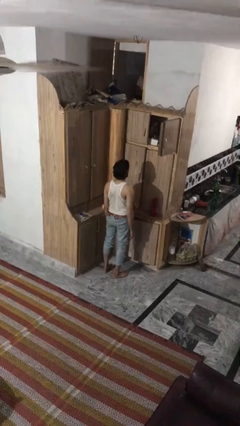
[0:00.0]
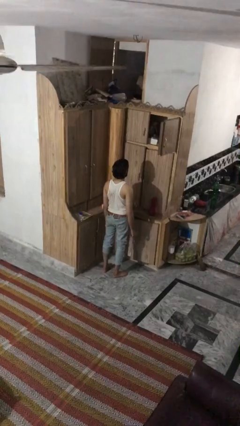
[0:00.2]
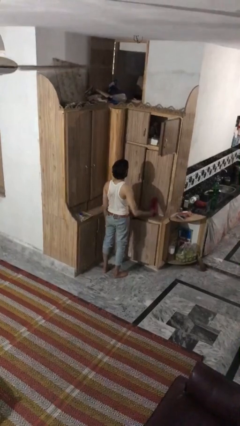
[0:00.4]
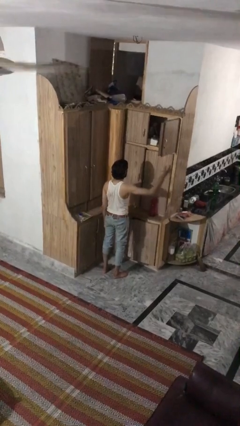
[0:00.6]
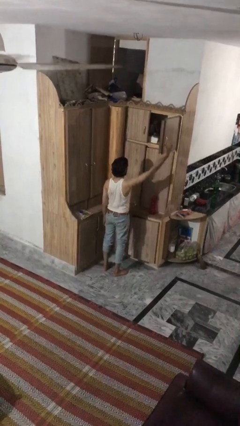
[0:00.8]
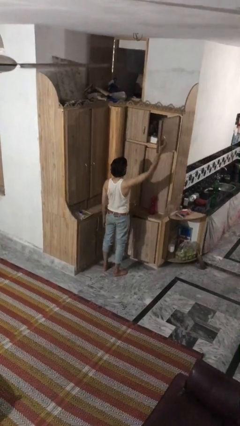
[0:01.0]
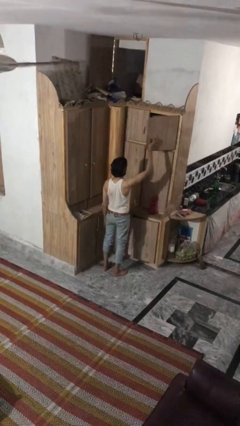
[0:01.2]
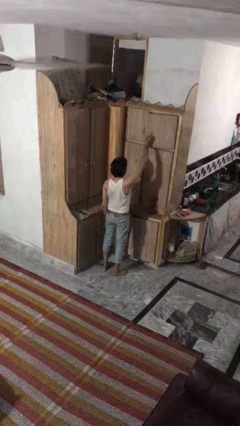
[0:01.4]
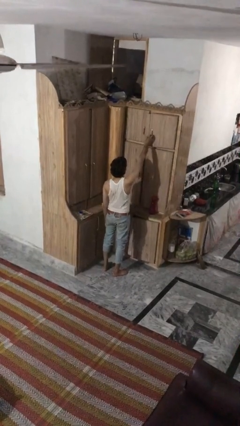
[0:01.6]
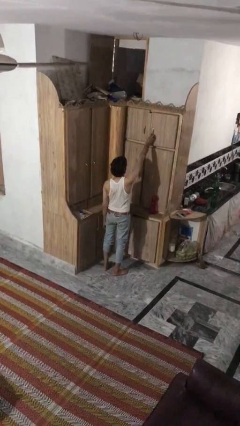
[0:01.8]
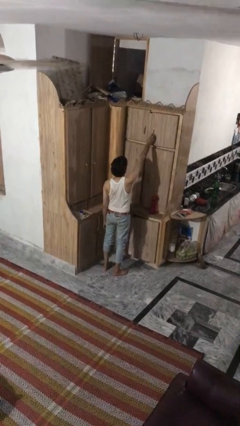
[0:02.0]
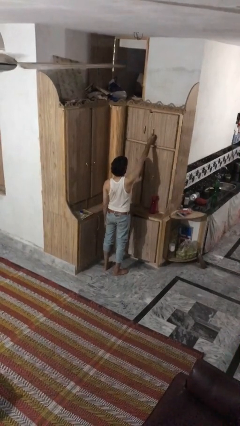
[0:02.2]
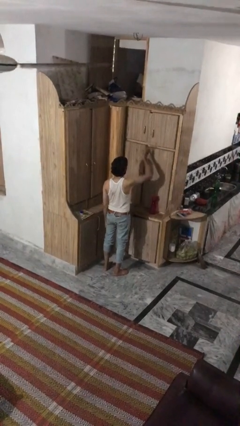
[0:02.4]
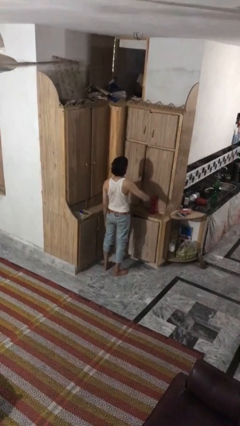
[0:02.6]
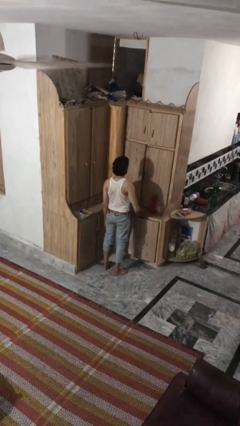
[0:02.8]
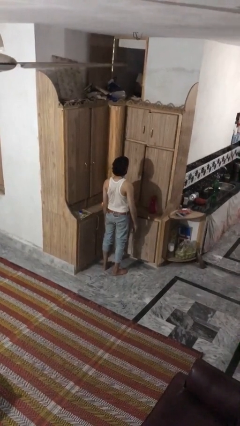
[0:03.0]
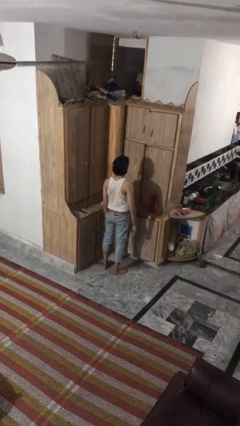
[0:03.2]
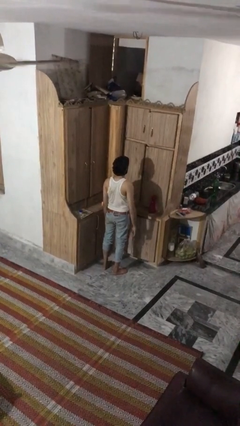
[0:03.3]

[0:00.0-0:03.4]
person closes cabinet

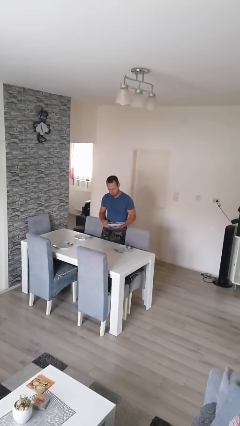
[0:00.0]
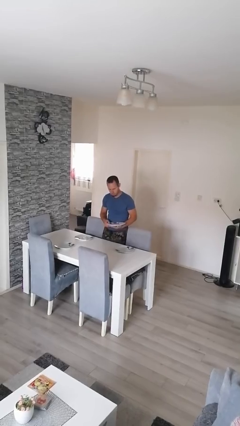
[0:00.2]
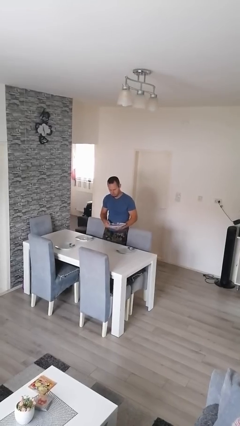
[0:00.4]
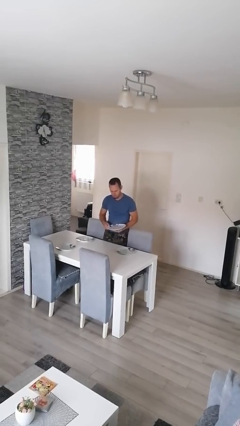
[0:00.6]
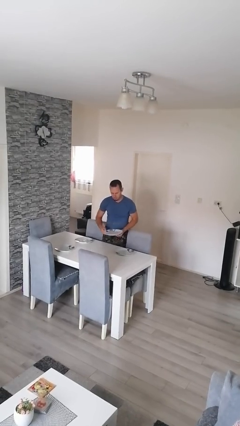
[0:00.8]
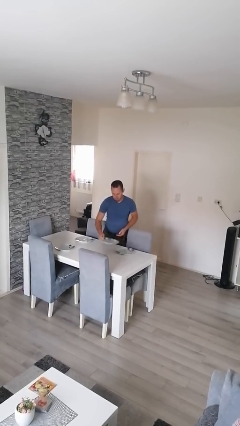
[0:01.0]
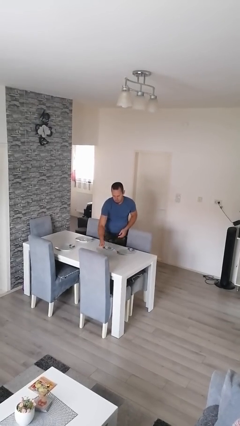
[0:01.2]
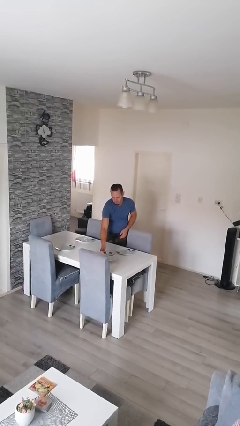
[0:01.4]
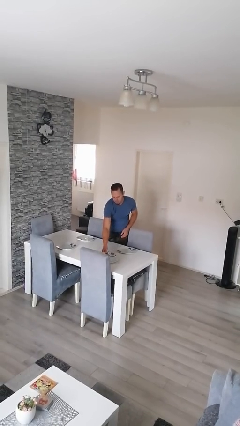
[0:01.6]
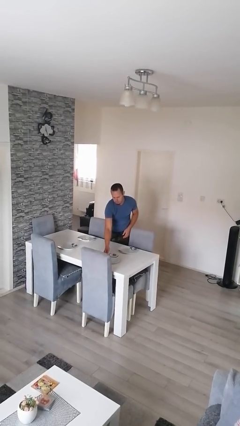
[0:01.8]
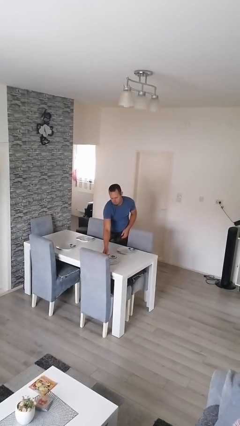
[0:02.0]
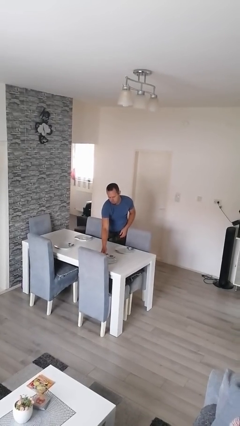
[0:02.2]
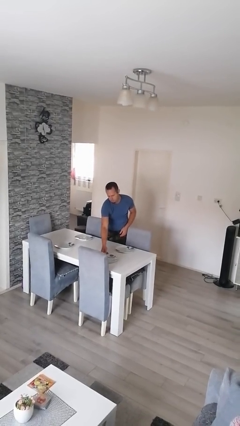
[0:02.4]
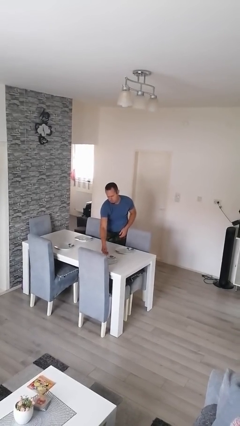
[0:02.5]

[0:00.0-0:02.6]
person sets table

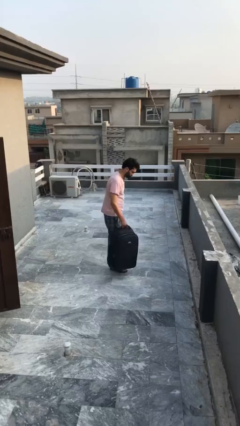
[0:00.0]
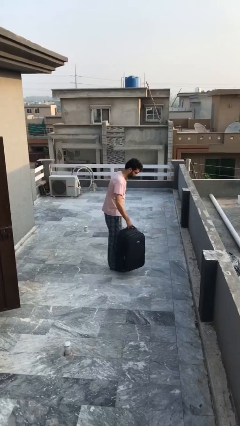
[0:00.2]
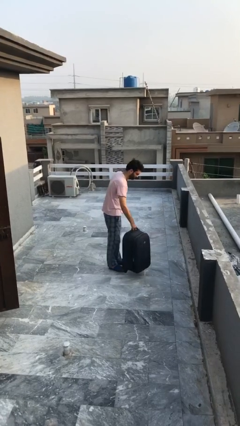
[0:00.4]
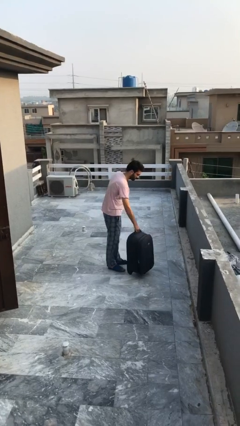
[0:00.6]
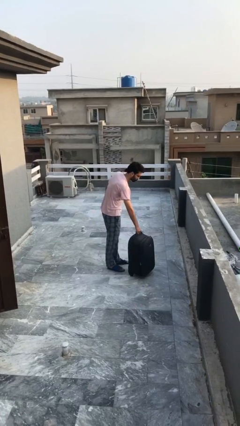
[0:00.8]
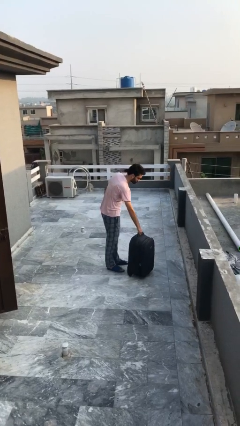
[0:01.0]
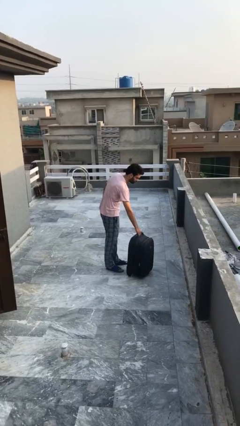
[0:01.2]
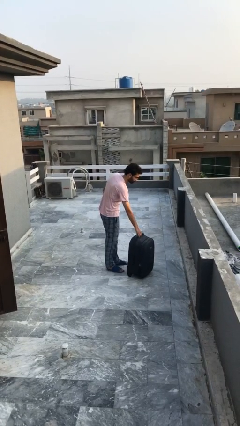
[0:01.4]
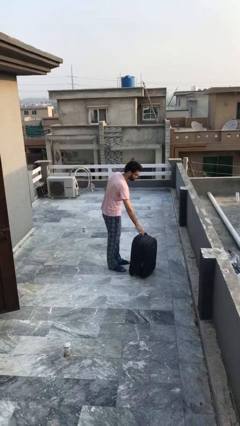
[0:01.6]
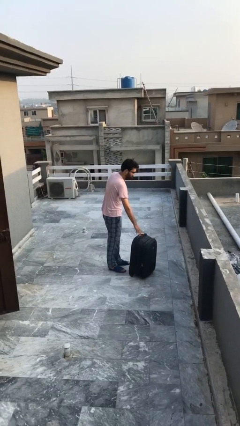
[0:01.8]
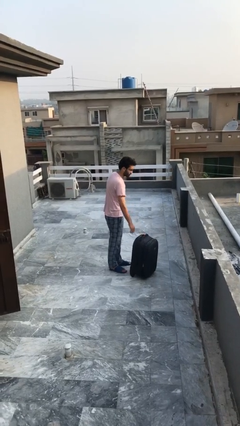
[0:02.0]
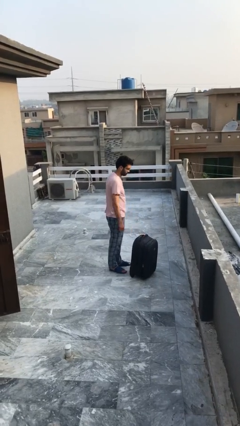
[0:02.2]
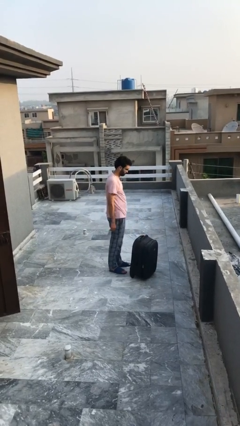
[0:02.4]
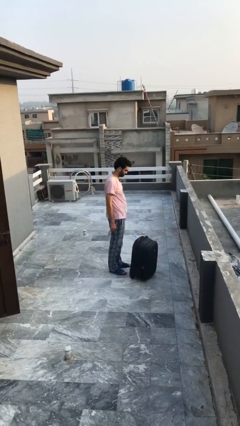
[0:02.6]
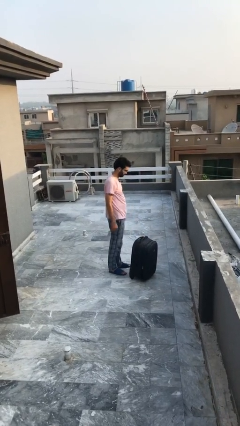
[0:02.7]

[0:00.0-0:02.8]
person puts down object on floor

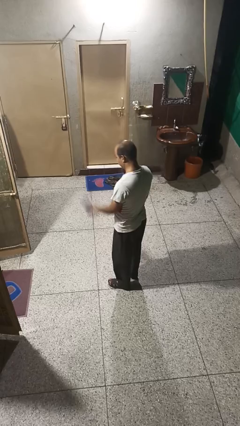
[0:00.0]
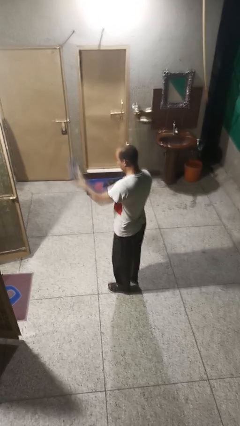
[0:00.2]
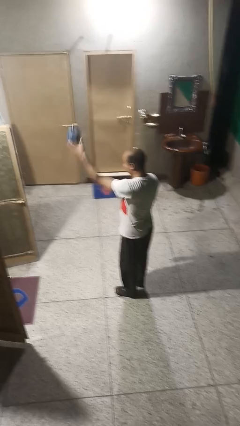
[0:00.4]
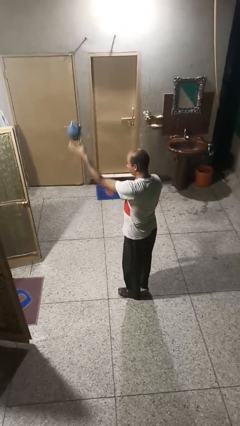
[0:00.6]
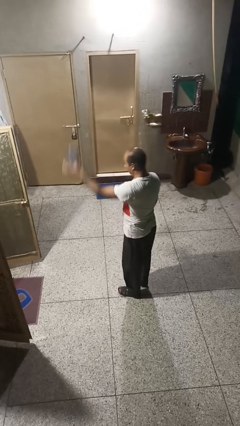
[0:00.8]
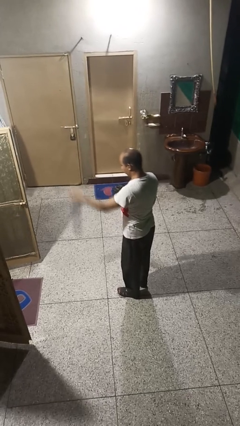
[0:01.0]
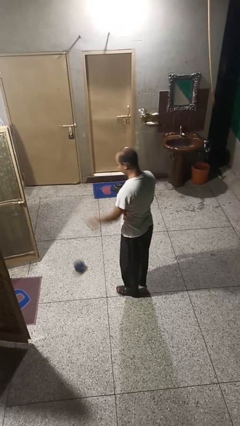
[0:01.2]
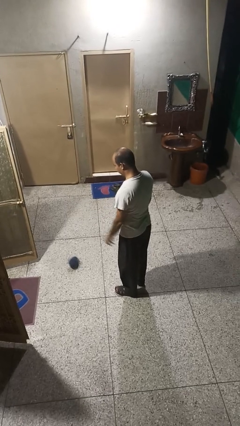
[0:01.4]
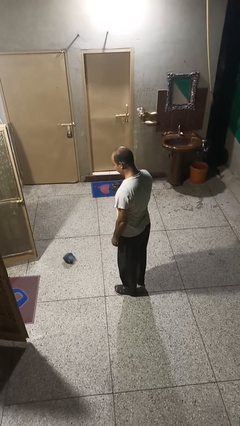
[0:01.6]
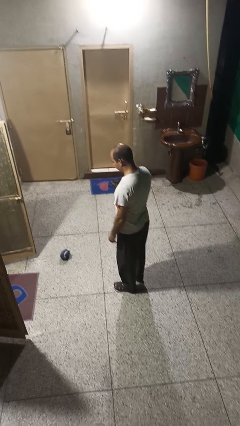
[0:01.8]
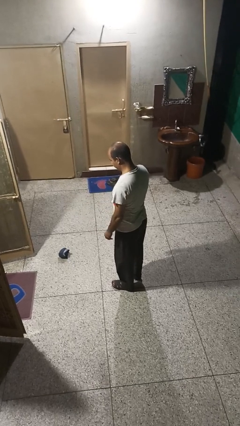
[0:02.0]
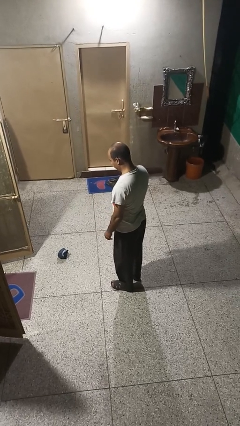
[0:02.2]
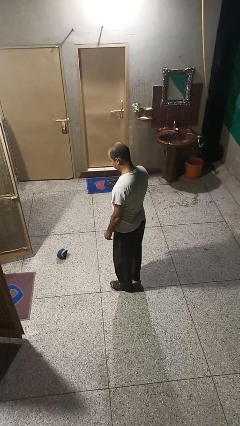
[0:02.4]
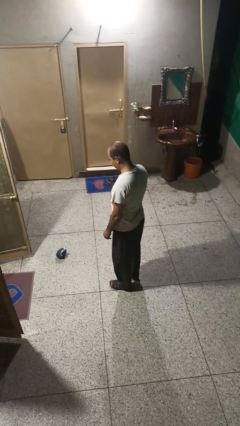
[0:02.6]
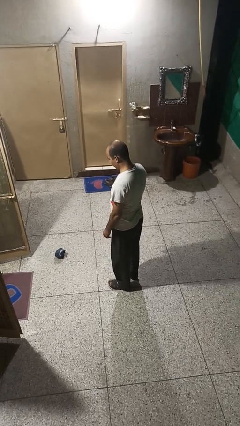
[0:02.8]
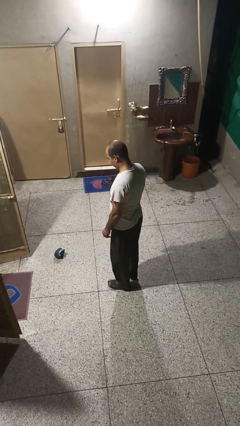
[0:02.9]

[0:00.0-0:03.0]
person throws object into air

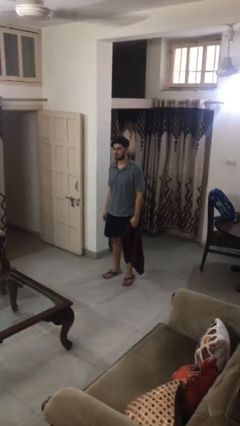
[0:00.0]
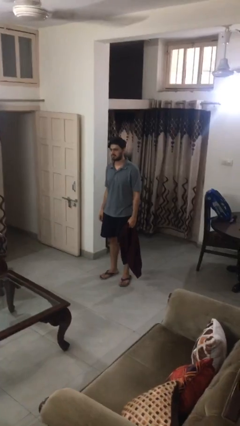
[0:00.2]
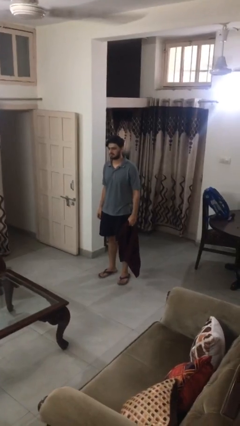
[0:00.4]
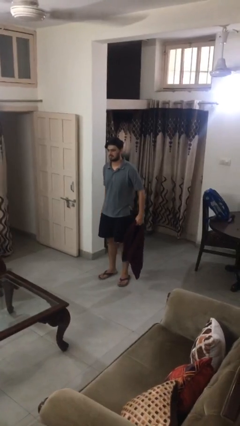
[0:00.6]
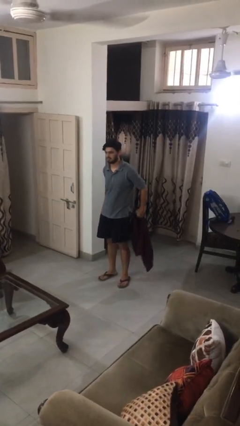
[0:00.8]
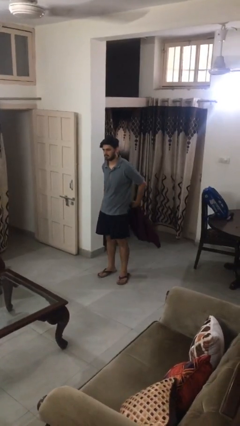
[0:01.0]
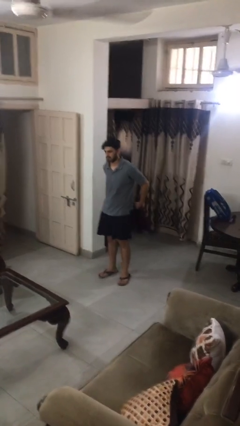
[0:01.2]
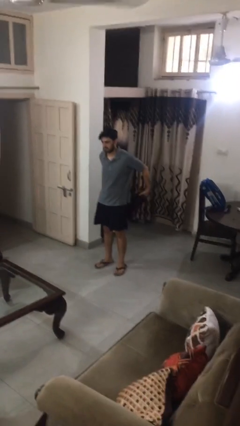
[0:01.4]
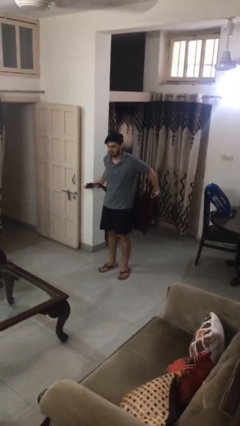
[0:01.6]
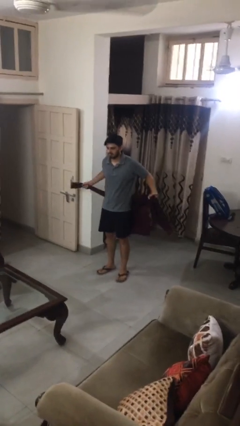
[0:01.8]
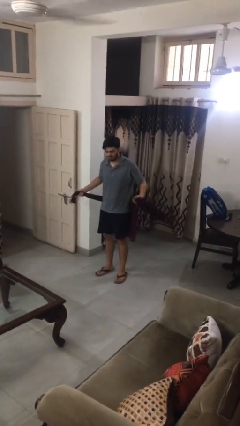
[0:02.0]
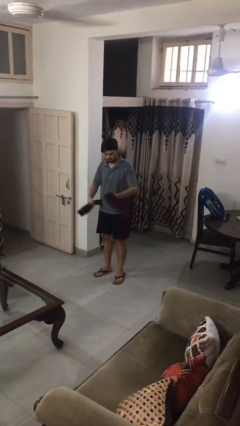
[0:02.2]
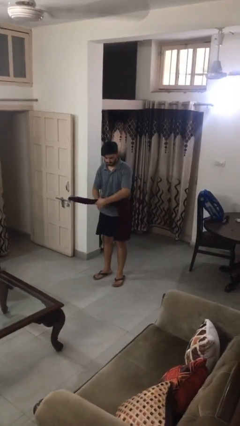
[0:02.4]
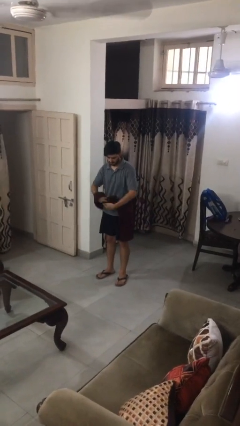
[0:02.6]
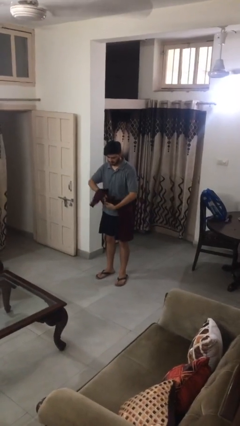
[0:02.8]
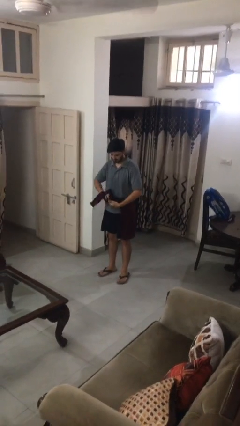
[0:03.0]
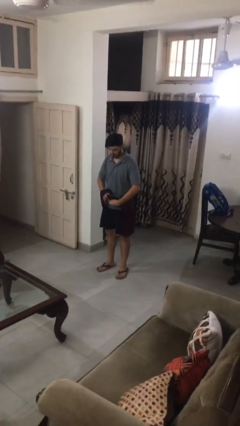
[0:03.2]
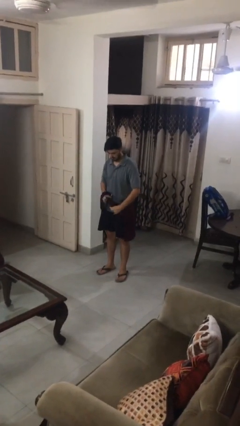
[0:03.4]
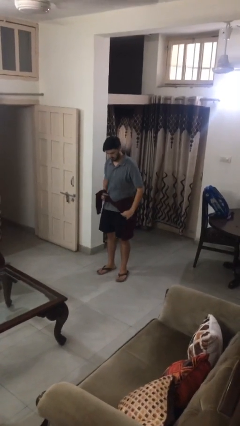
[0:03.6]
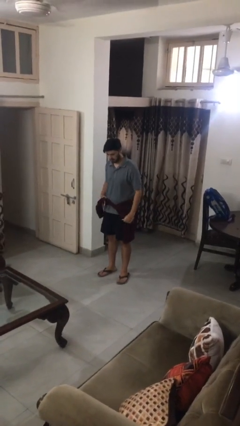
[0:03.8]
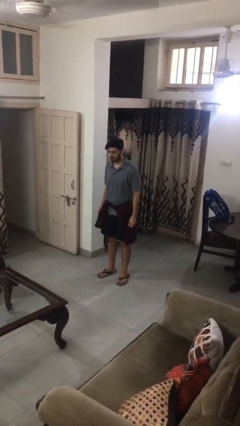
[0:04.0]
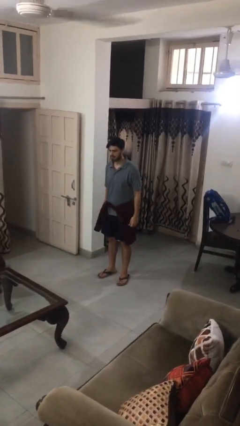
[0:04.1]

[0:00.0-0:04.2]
person ties jacket around waist

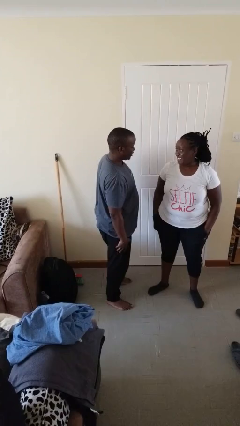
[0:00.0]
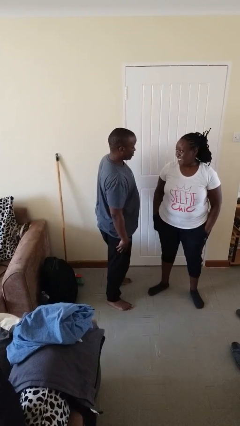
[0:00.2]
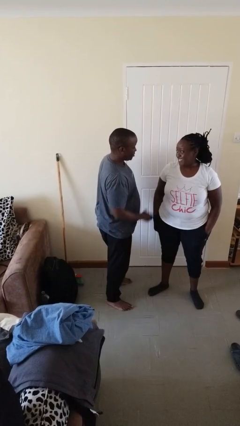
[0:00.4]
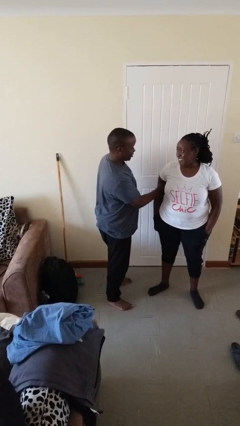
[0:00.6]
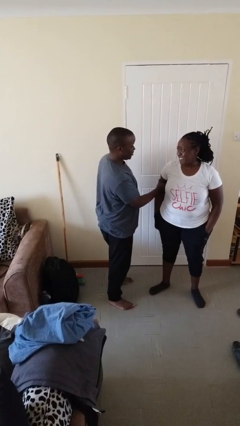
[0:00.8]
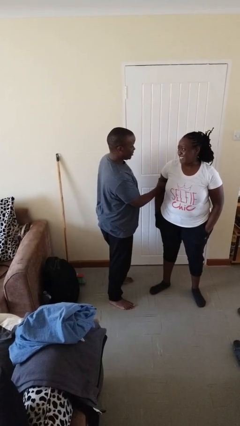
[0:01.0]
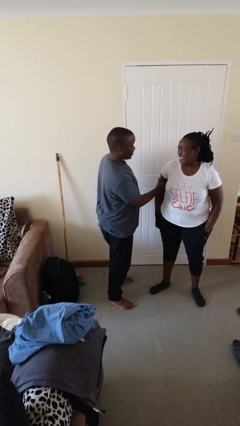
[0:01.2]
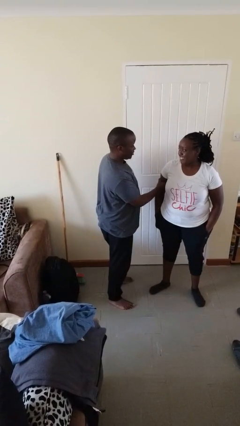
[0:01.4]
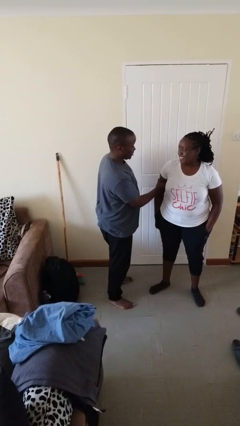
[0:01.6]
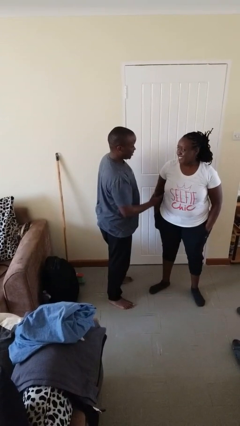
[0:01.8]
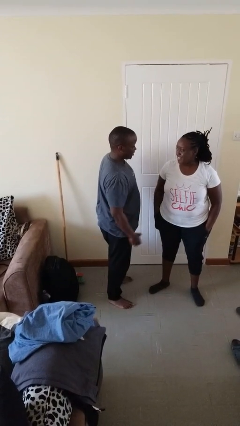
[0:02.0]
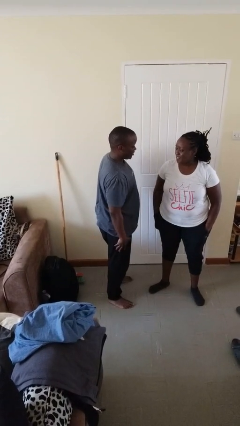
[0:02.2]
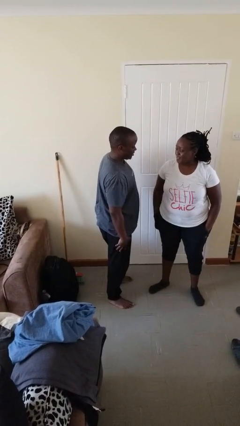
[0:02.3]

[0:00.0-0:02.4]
person grabs person by bicep
